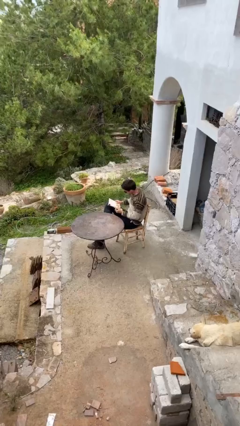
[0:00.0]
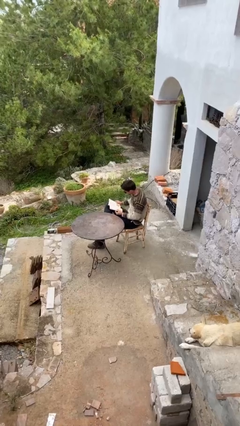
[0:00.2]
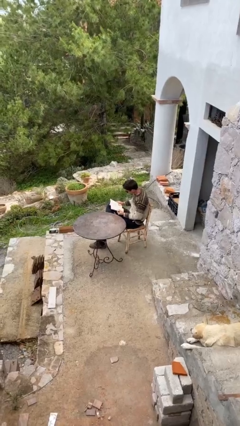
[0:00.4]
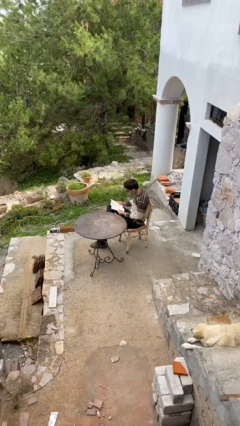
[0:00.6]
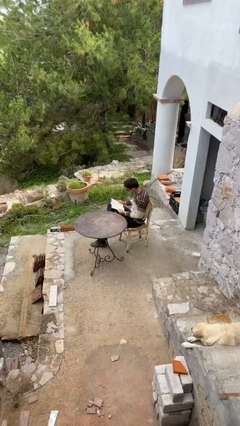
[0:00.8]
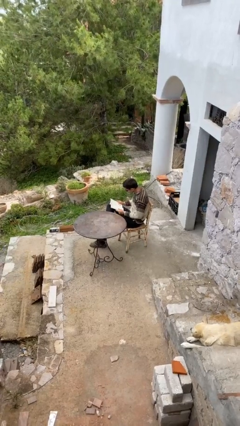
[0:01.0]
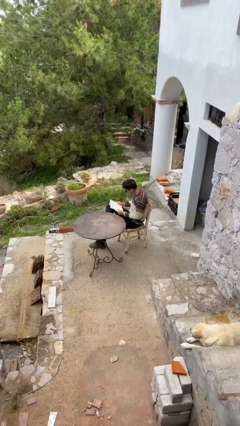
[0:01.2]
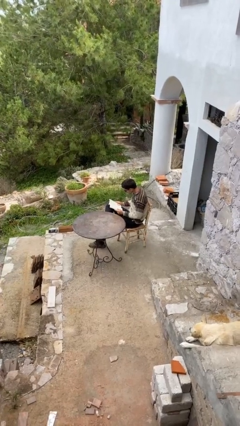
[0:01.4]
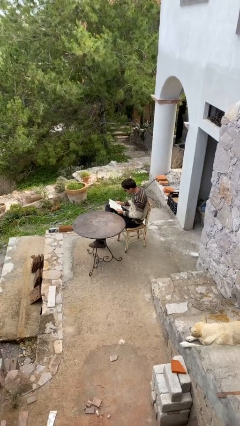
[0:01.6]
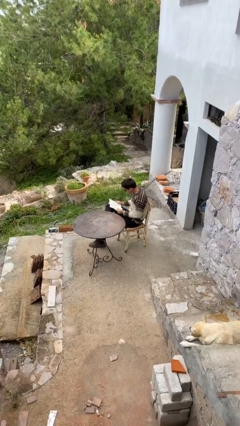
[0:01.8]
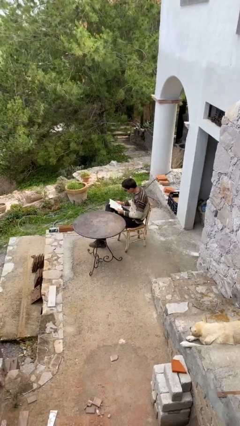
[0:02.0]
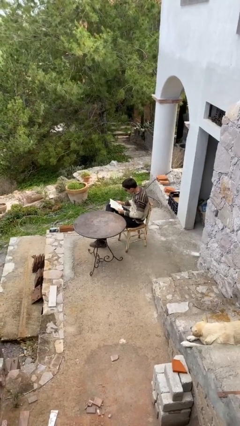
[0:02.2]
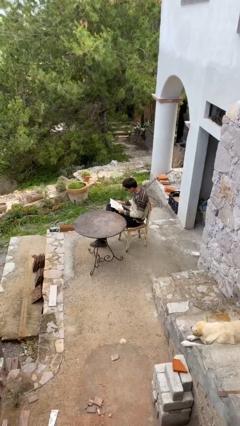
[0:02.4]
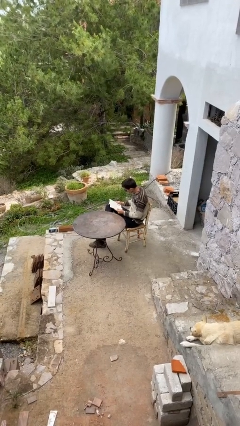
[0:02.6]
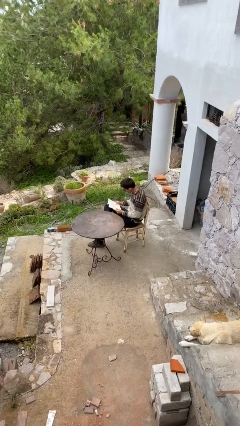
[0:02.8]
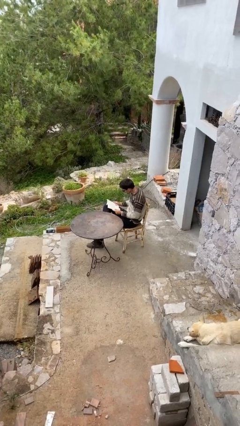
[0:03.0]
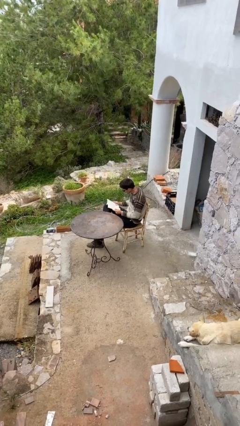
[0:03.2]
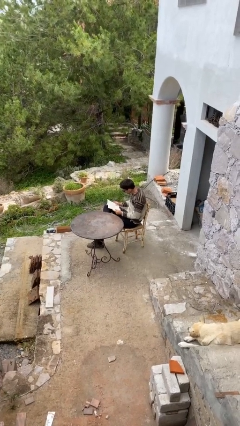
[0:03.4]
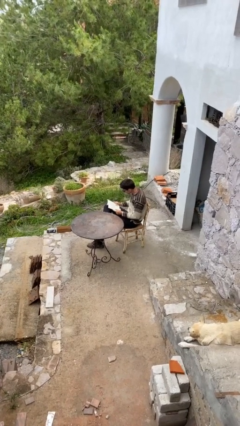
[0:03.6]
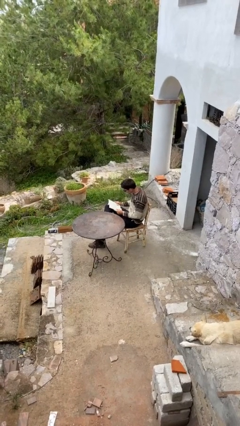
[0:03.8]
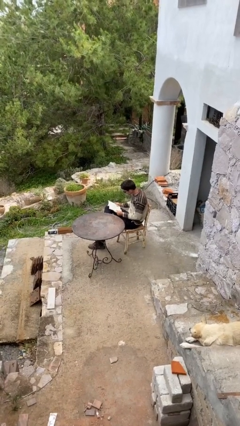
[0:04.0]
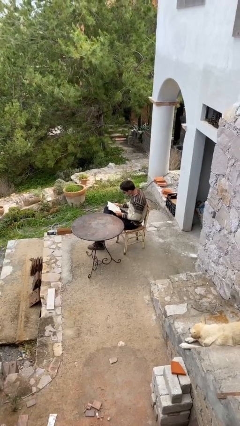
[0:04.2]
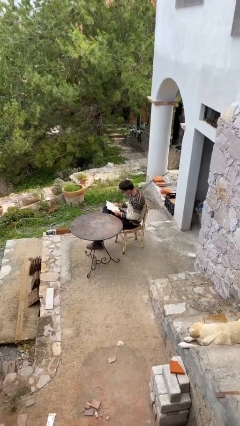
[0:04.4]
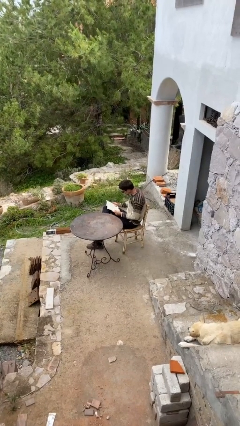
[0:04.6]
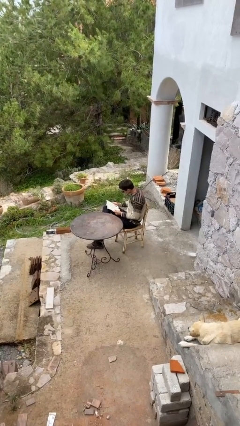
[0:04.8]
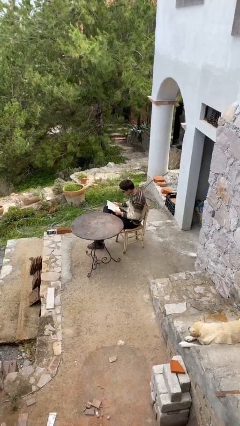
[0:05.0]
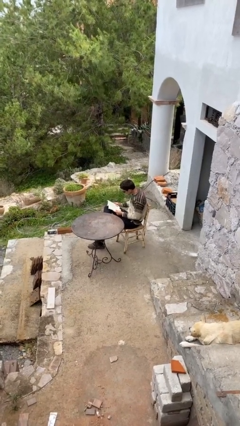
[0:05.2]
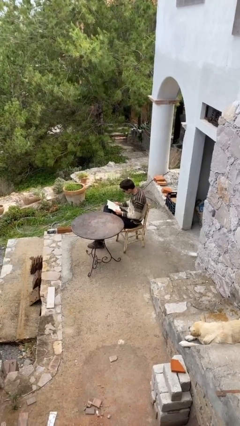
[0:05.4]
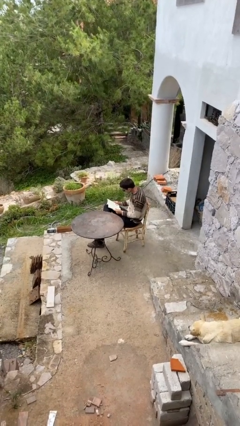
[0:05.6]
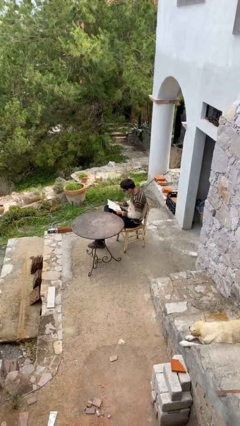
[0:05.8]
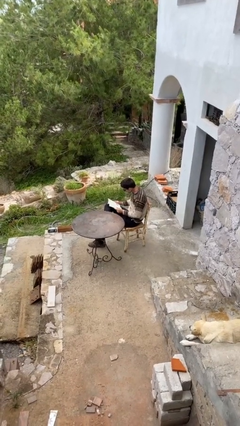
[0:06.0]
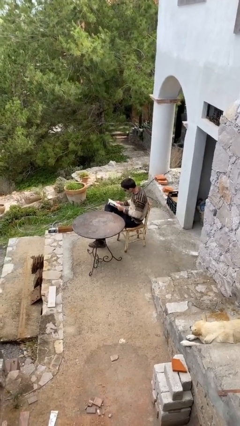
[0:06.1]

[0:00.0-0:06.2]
person reads document

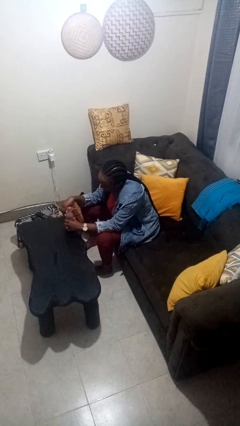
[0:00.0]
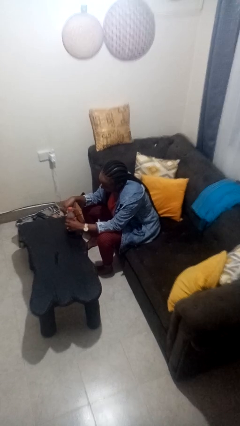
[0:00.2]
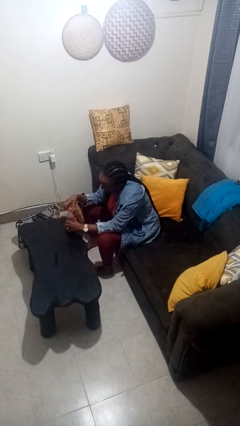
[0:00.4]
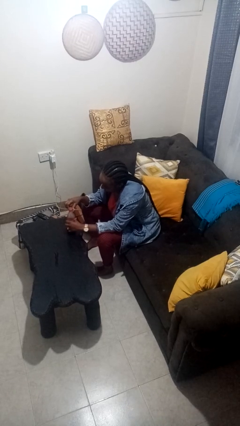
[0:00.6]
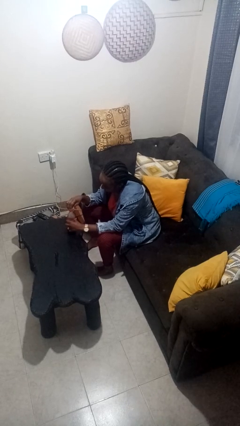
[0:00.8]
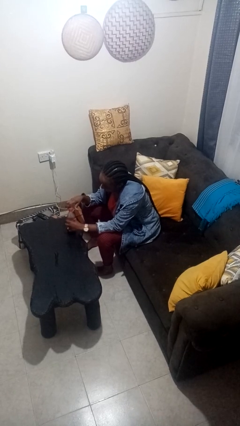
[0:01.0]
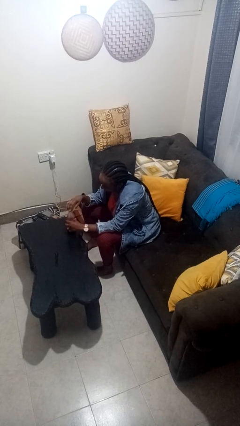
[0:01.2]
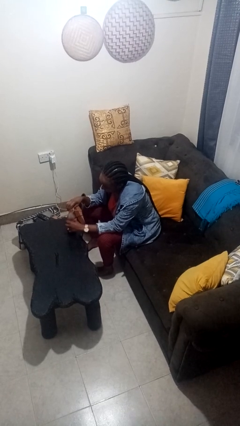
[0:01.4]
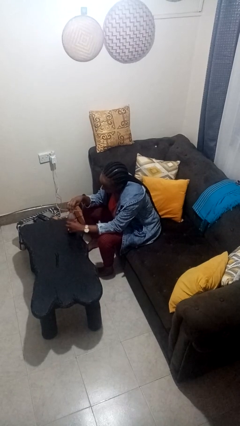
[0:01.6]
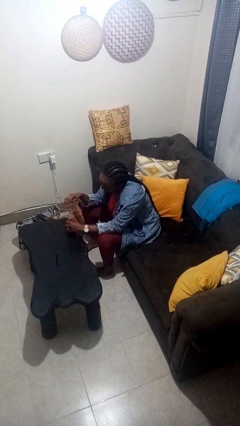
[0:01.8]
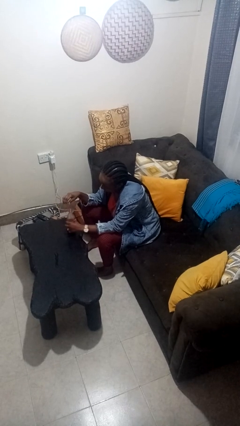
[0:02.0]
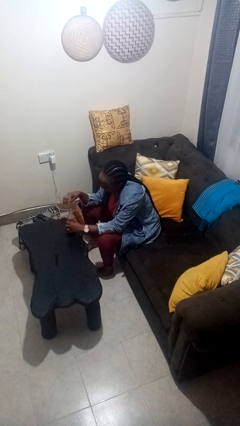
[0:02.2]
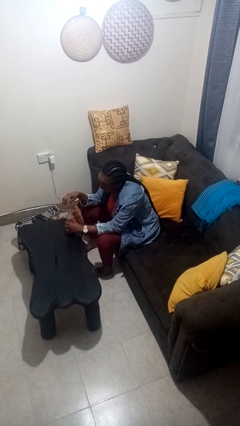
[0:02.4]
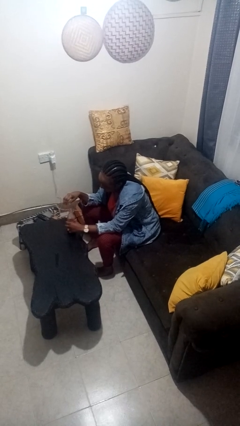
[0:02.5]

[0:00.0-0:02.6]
person unscrews lid from bottle

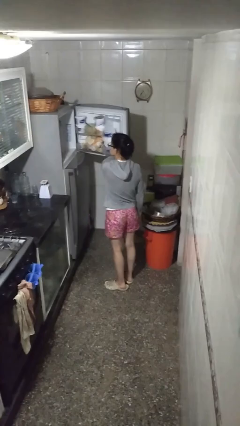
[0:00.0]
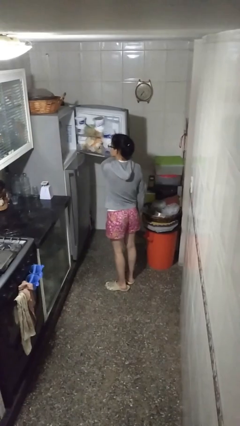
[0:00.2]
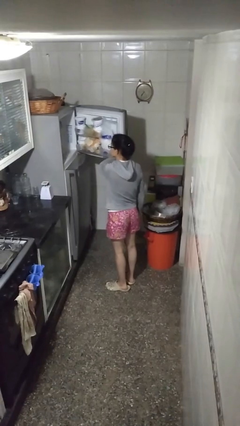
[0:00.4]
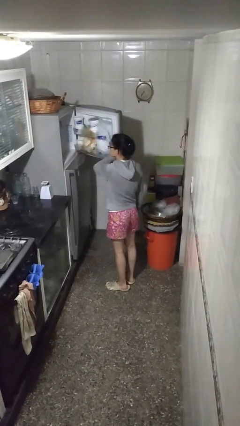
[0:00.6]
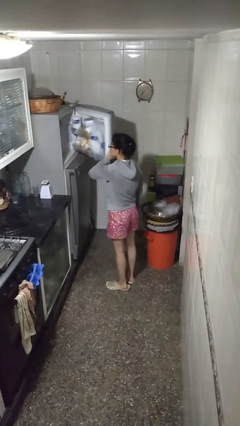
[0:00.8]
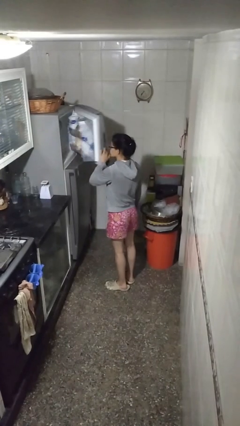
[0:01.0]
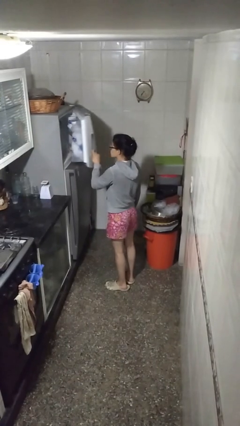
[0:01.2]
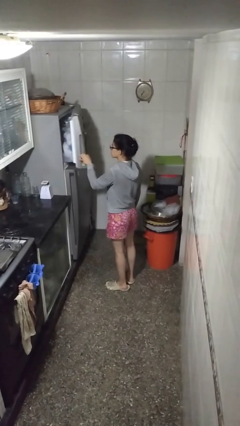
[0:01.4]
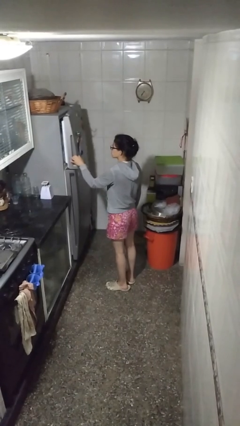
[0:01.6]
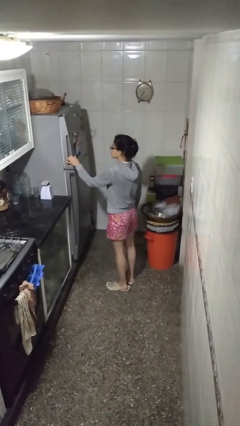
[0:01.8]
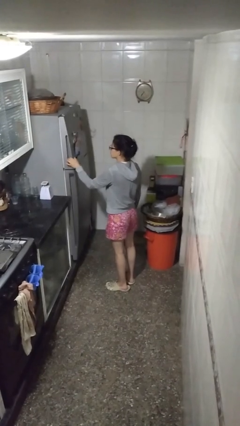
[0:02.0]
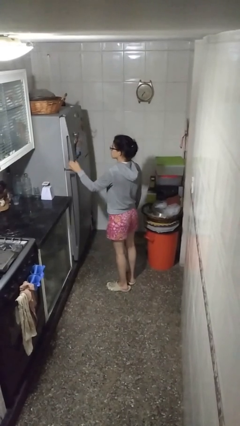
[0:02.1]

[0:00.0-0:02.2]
person closes refrigerator

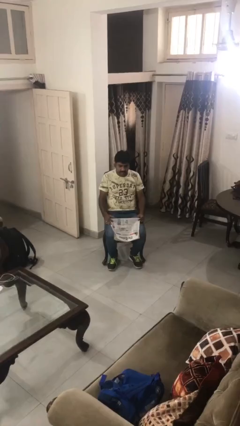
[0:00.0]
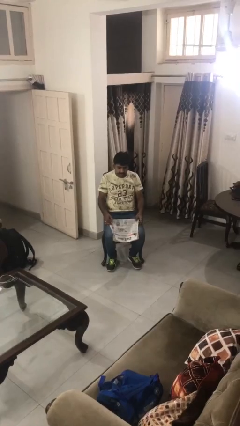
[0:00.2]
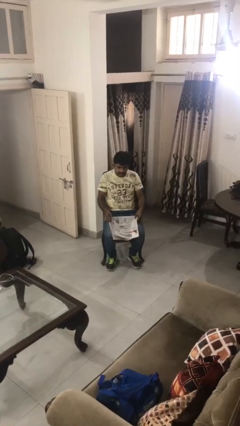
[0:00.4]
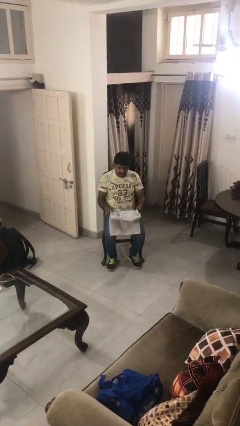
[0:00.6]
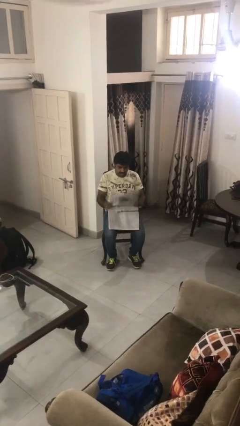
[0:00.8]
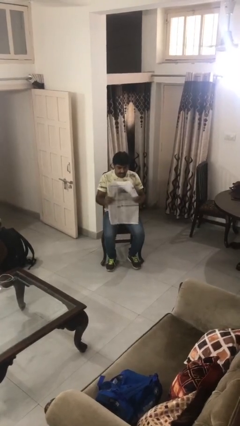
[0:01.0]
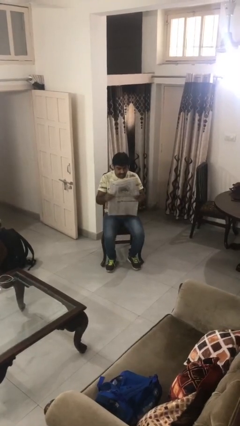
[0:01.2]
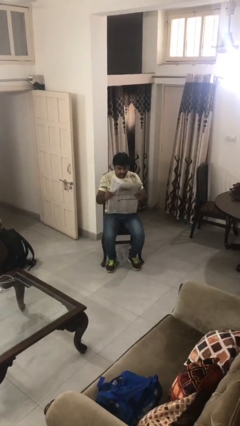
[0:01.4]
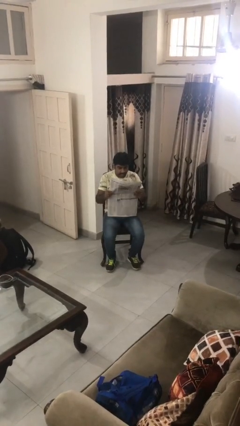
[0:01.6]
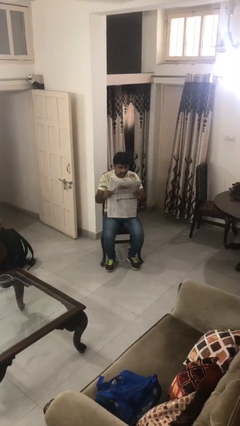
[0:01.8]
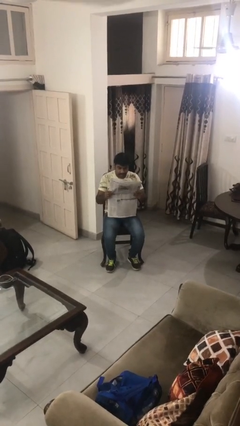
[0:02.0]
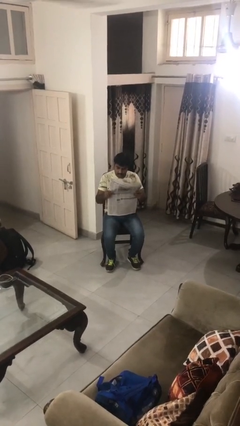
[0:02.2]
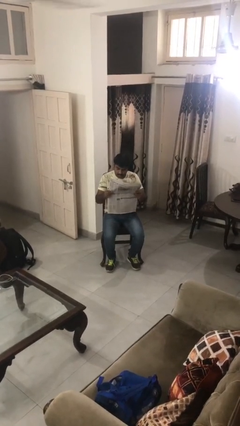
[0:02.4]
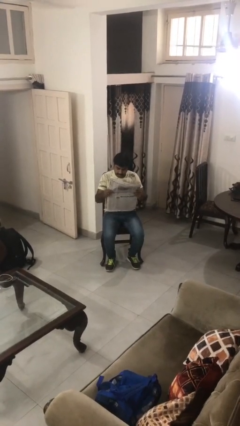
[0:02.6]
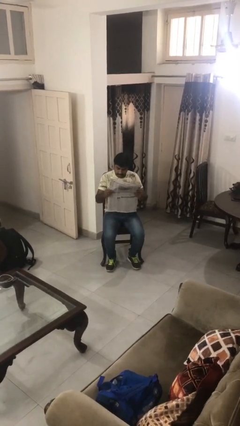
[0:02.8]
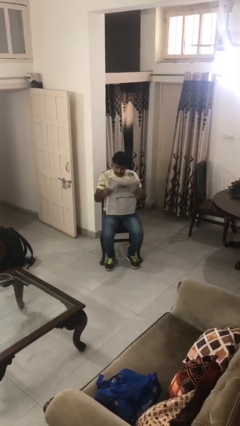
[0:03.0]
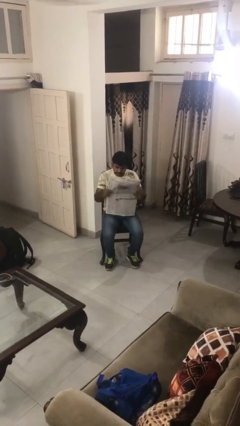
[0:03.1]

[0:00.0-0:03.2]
person reads newspaper

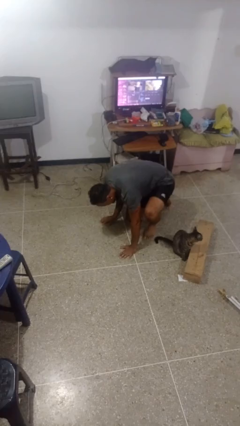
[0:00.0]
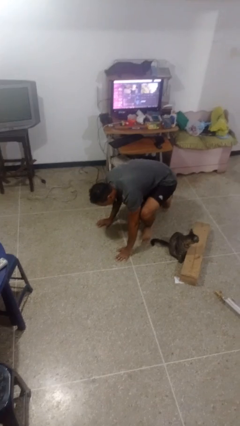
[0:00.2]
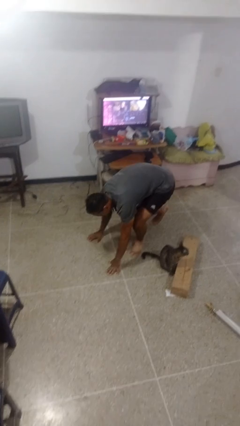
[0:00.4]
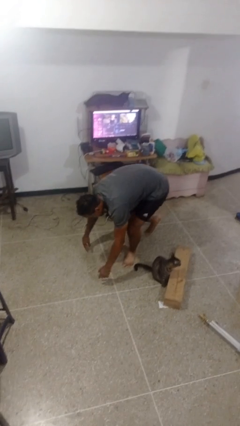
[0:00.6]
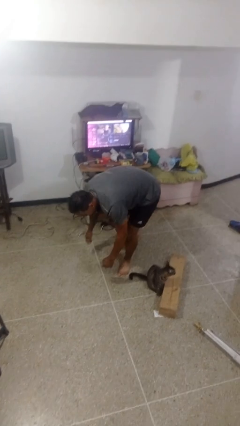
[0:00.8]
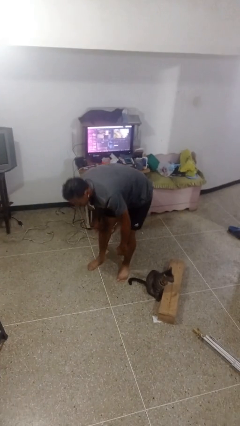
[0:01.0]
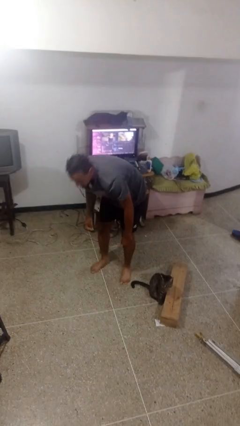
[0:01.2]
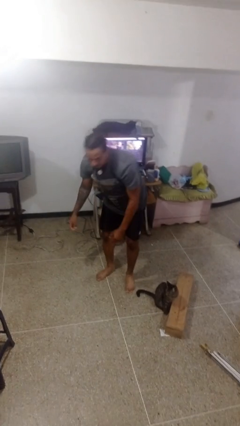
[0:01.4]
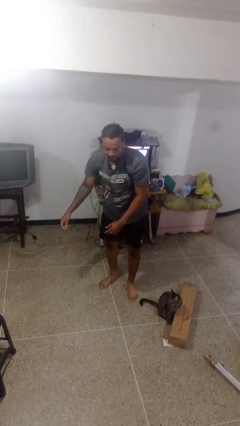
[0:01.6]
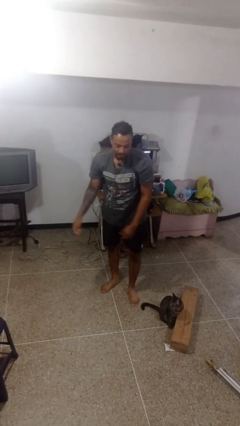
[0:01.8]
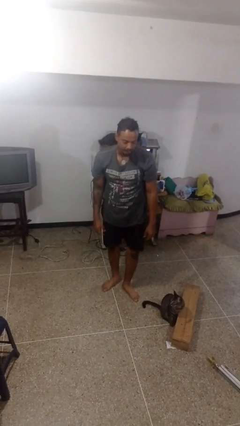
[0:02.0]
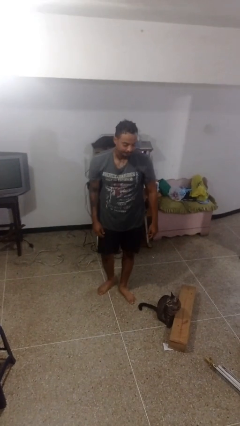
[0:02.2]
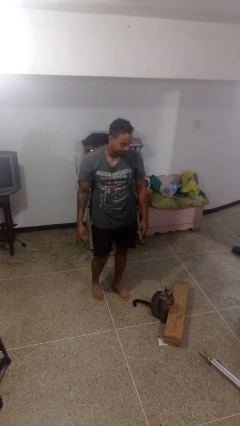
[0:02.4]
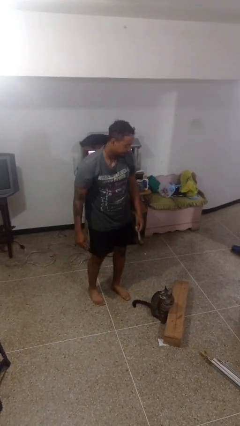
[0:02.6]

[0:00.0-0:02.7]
person stands up from floor

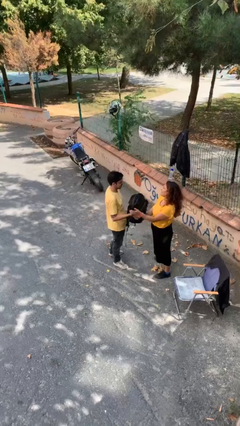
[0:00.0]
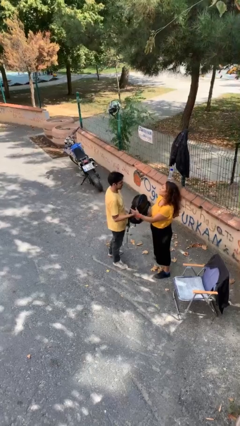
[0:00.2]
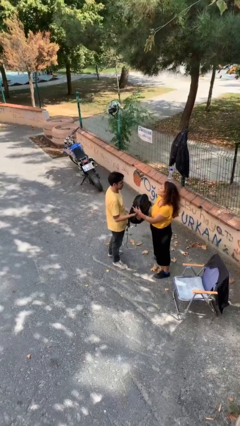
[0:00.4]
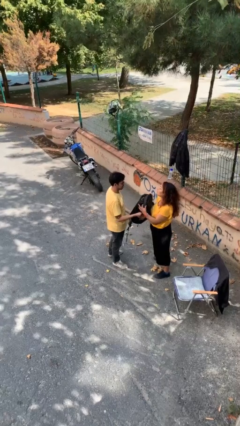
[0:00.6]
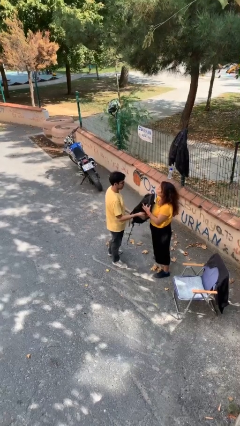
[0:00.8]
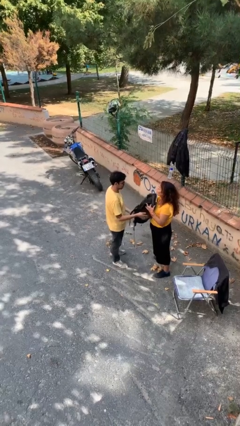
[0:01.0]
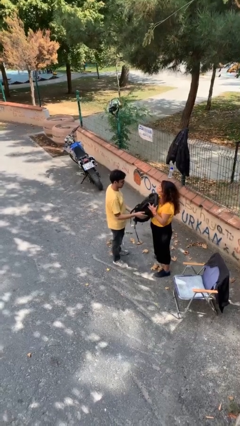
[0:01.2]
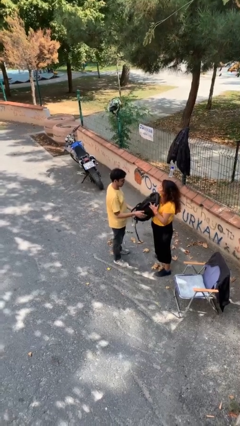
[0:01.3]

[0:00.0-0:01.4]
person transfers object to person
